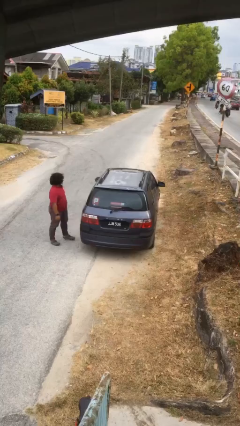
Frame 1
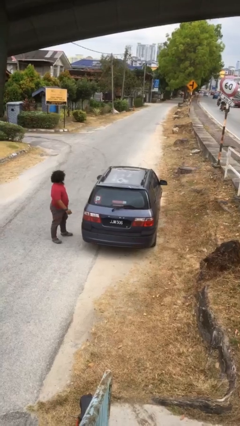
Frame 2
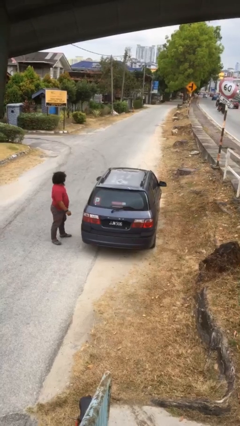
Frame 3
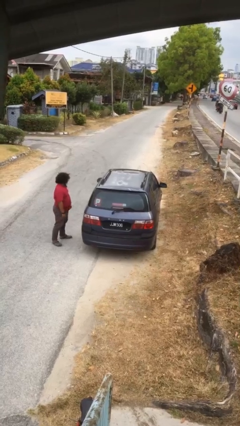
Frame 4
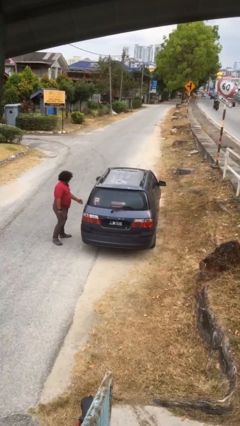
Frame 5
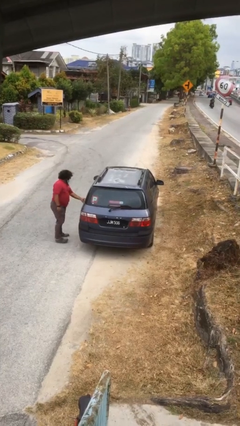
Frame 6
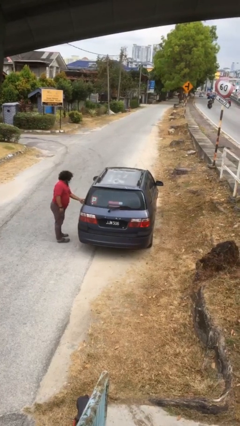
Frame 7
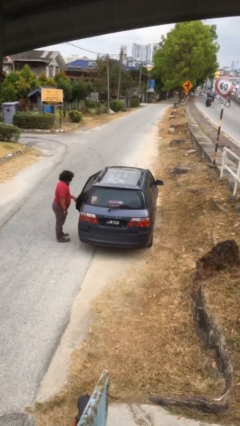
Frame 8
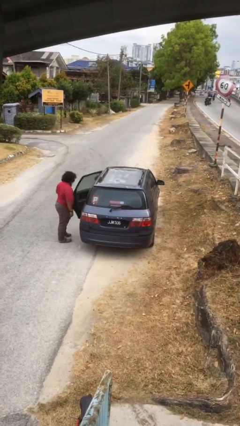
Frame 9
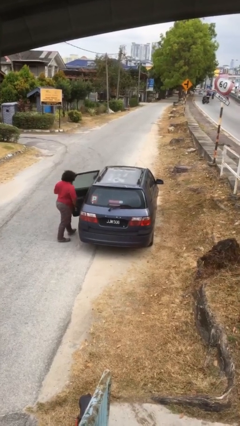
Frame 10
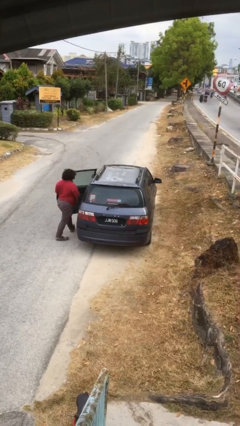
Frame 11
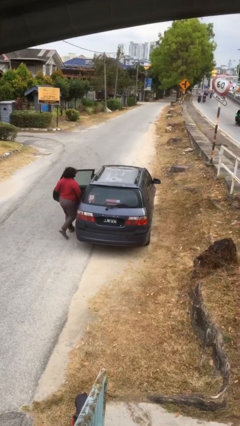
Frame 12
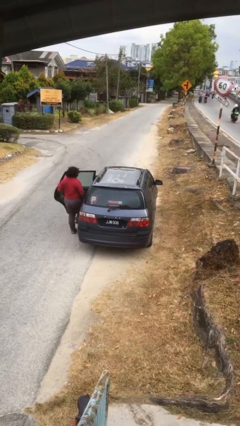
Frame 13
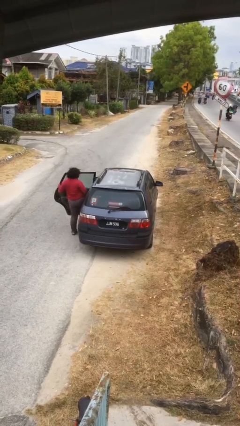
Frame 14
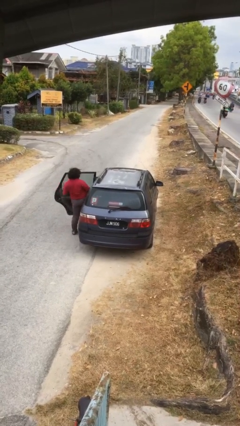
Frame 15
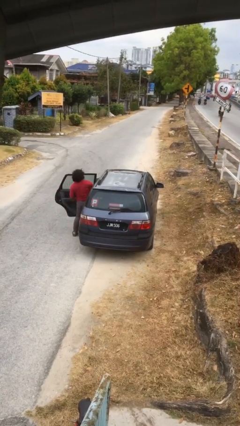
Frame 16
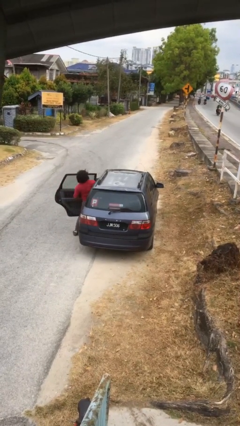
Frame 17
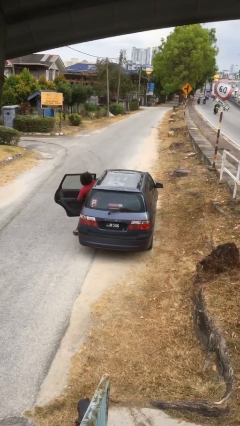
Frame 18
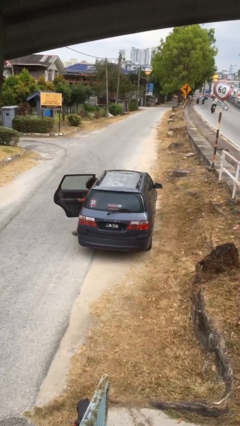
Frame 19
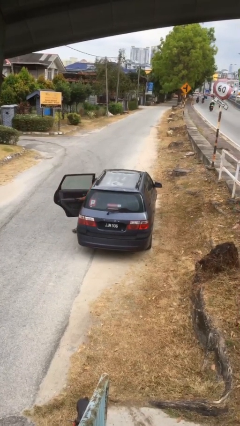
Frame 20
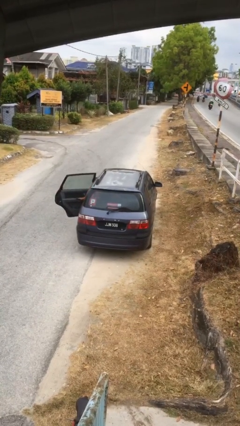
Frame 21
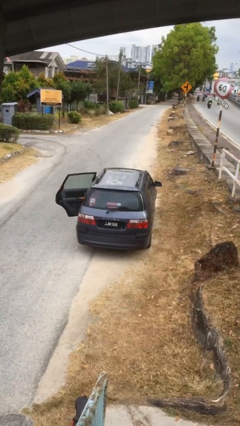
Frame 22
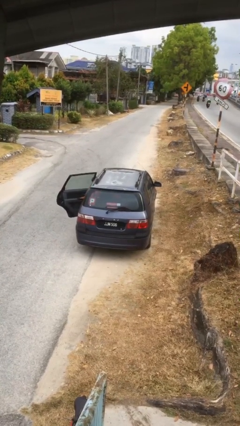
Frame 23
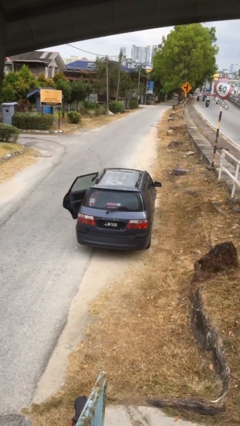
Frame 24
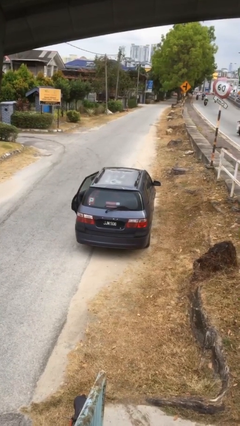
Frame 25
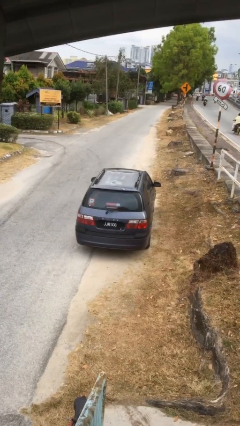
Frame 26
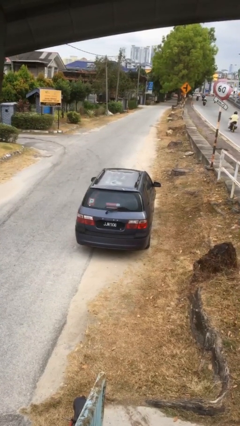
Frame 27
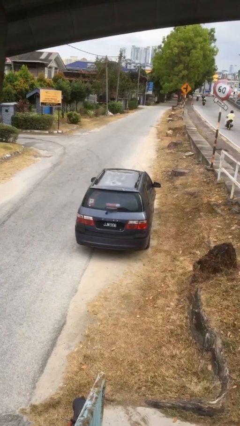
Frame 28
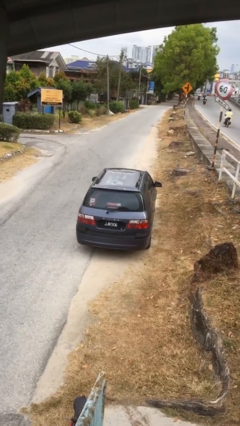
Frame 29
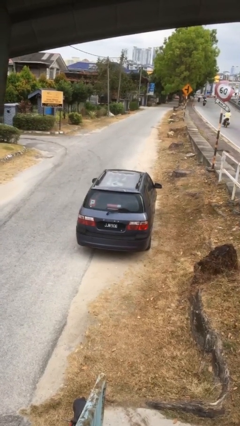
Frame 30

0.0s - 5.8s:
car picks up person

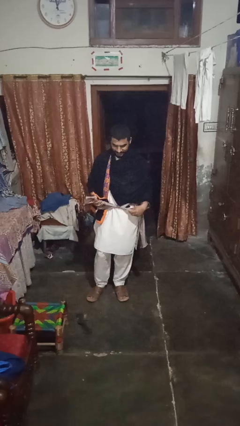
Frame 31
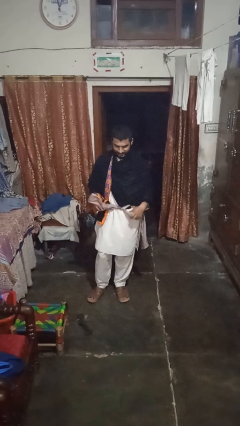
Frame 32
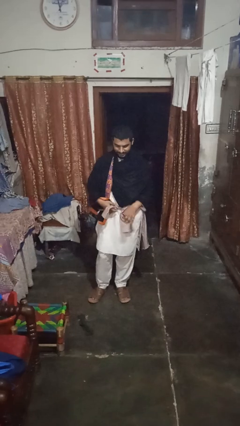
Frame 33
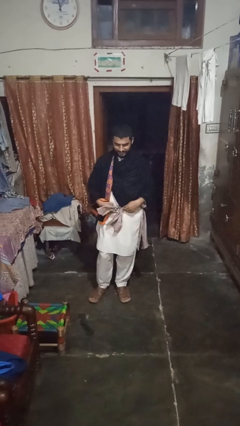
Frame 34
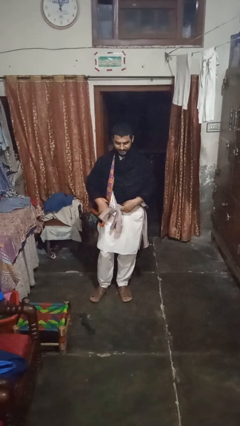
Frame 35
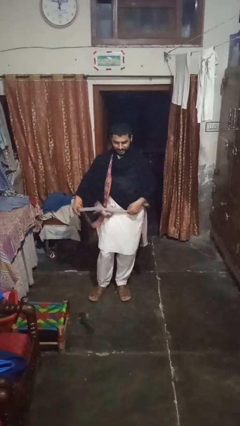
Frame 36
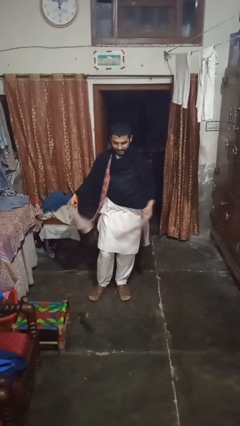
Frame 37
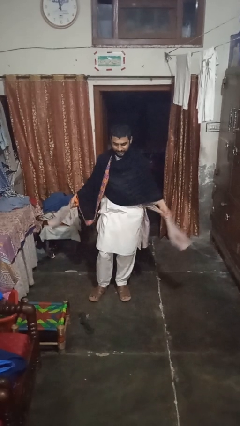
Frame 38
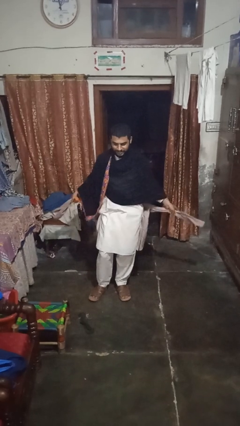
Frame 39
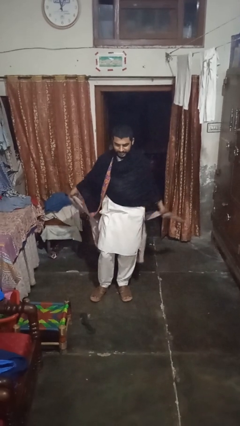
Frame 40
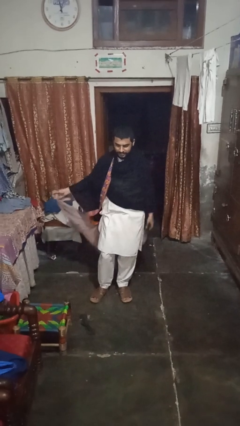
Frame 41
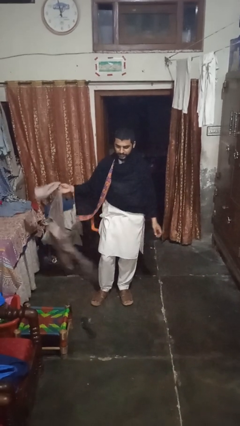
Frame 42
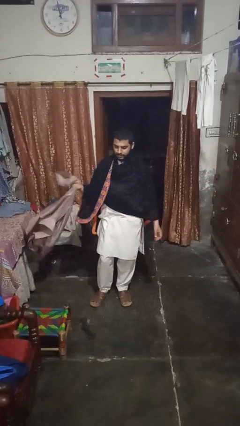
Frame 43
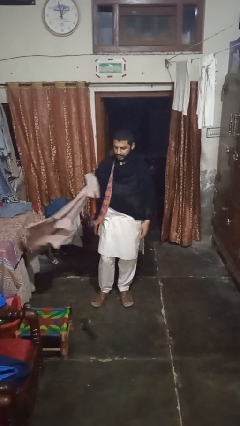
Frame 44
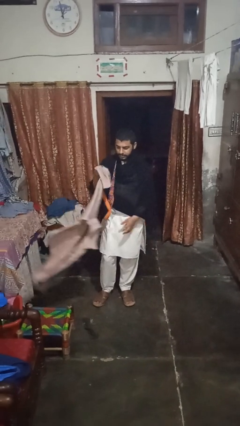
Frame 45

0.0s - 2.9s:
person unties jacket around waist

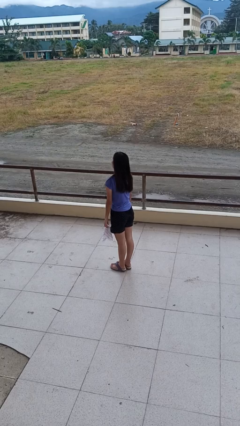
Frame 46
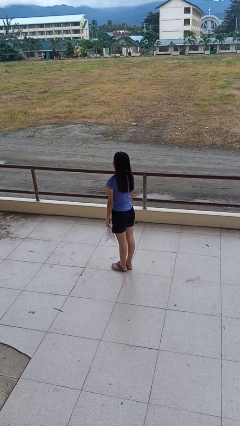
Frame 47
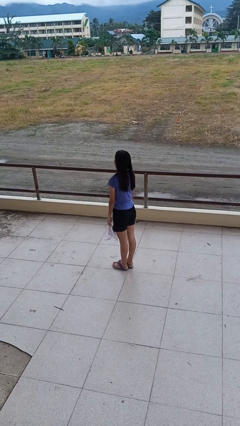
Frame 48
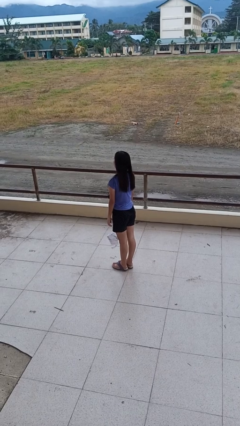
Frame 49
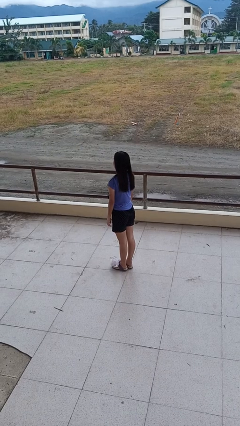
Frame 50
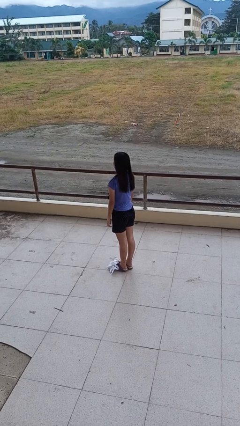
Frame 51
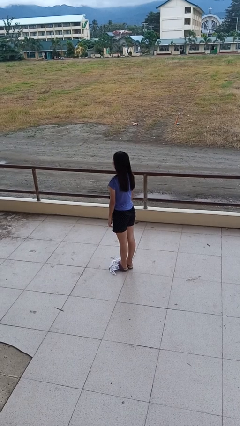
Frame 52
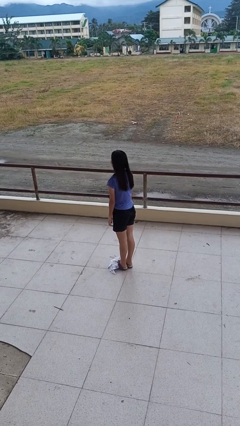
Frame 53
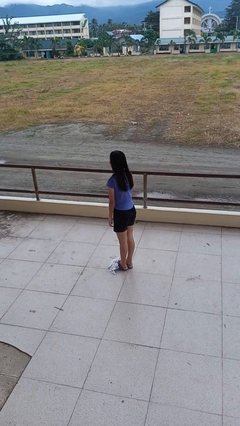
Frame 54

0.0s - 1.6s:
person drops object

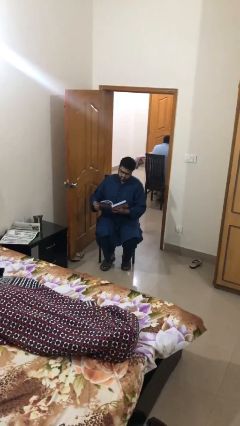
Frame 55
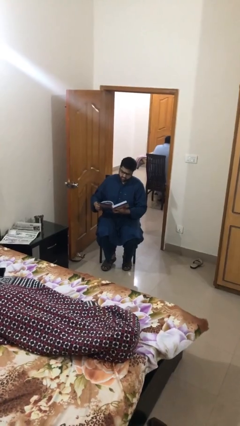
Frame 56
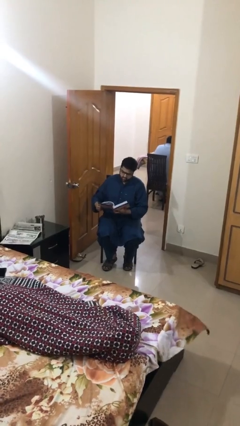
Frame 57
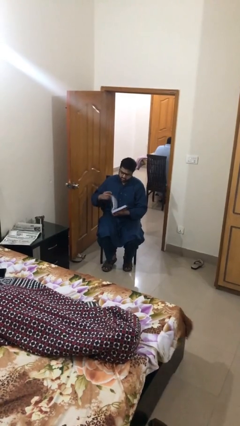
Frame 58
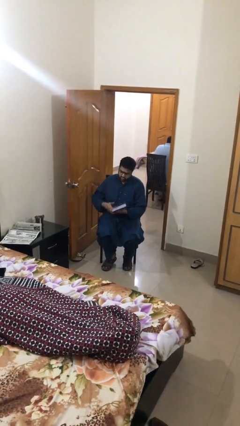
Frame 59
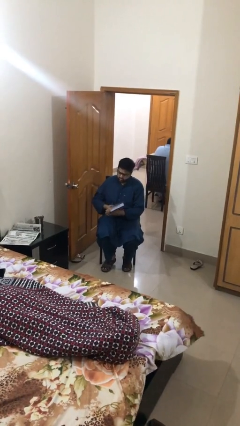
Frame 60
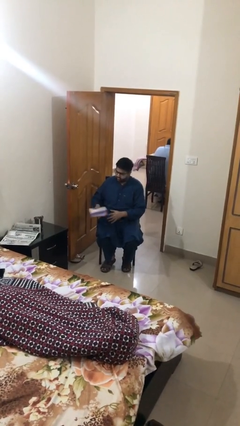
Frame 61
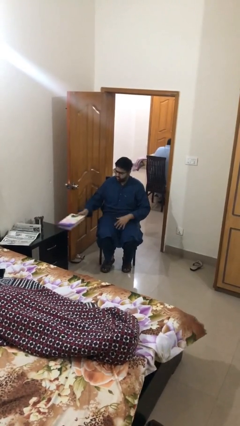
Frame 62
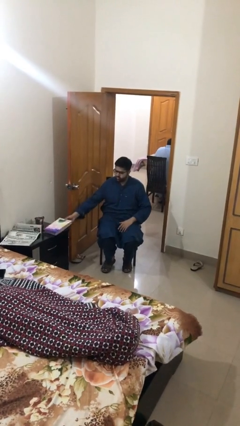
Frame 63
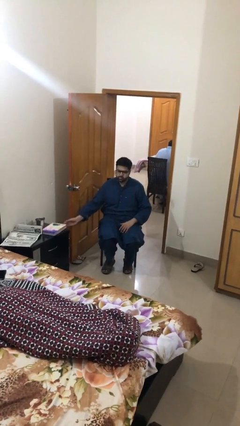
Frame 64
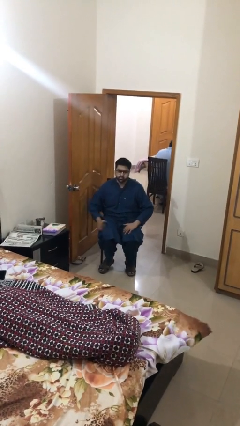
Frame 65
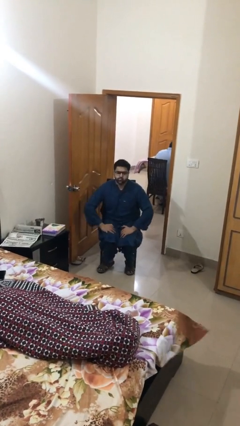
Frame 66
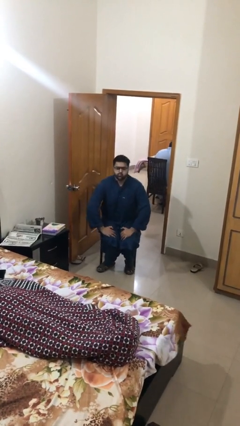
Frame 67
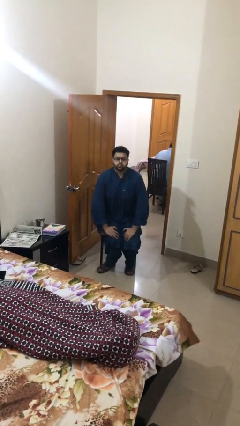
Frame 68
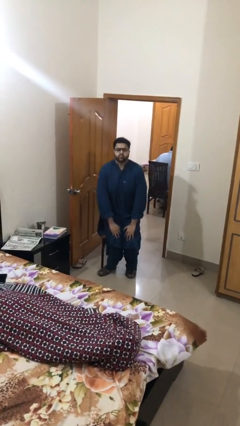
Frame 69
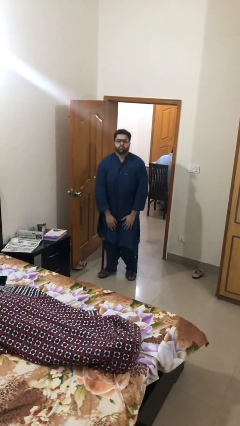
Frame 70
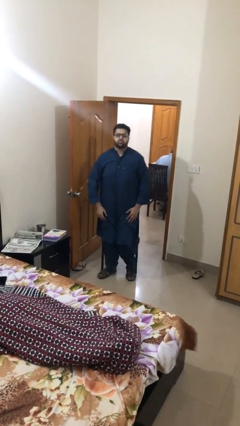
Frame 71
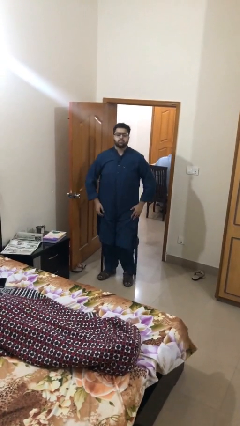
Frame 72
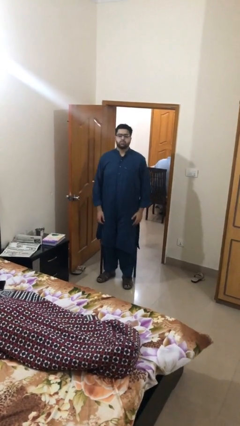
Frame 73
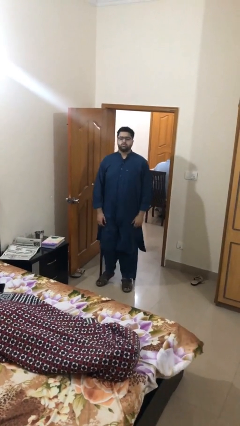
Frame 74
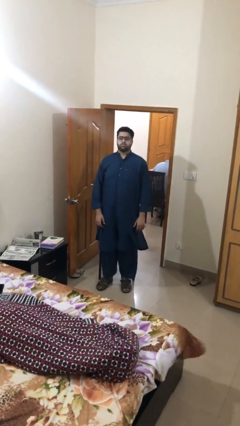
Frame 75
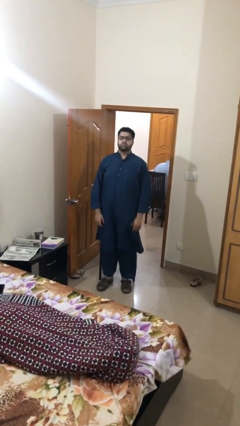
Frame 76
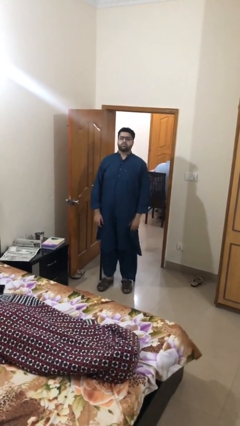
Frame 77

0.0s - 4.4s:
person stands up

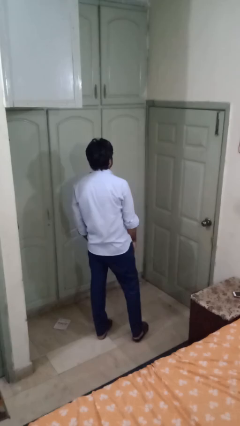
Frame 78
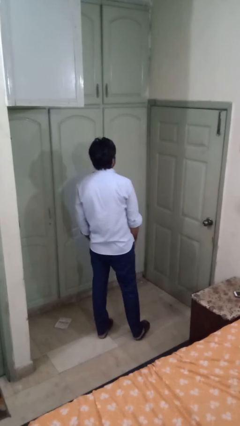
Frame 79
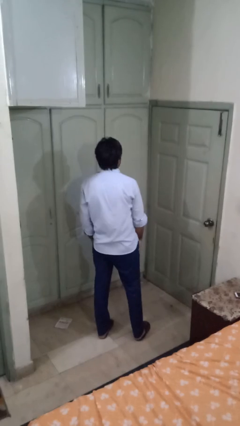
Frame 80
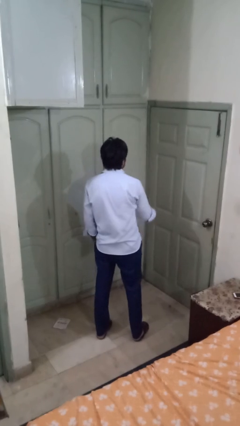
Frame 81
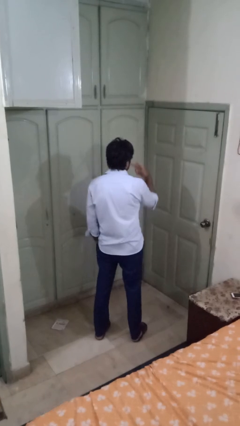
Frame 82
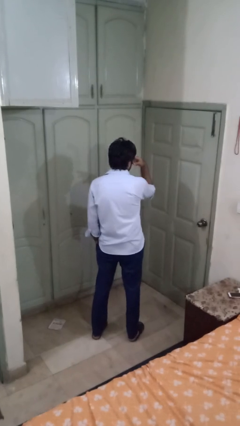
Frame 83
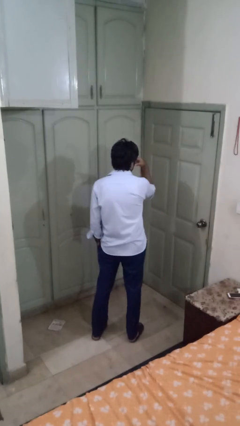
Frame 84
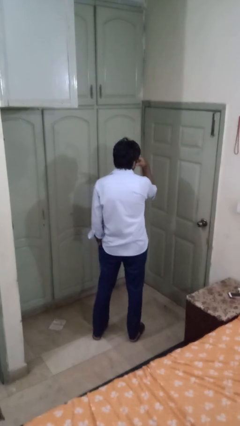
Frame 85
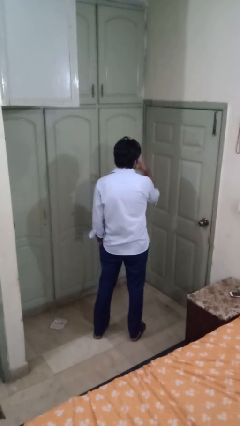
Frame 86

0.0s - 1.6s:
person gestures watch closely

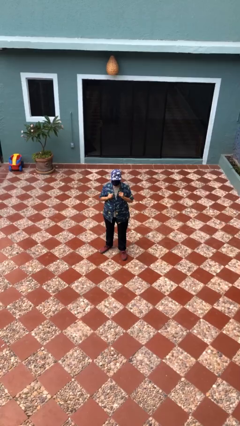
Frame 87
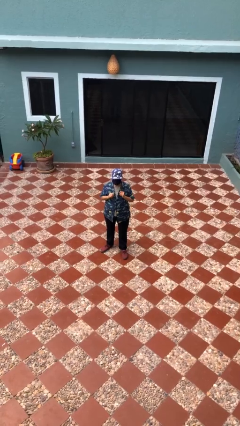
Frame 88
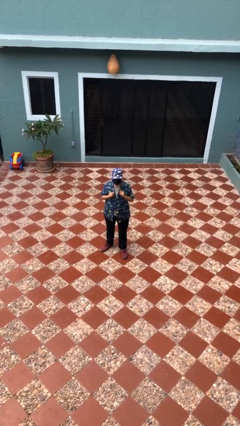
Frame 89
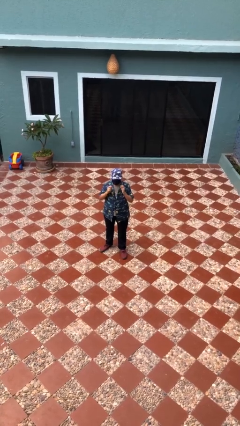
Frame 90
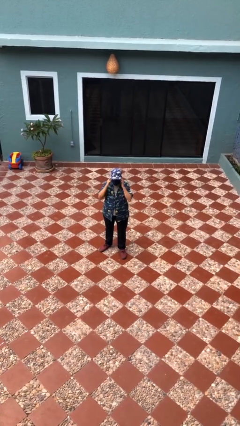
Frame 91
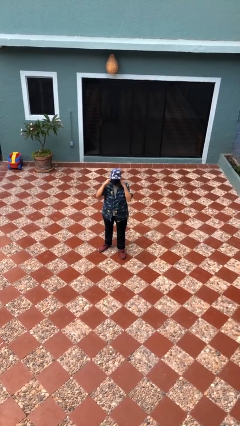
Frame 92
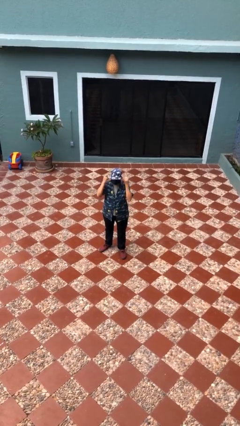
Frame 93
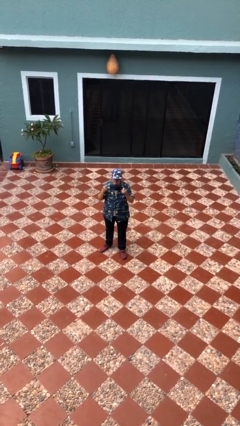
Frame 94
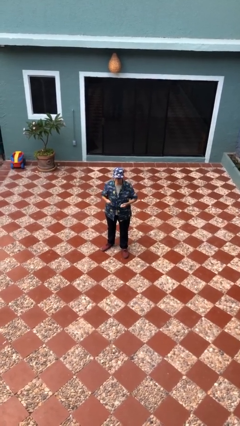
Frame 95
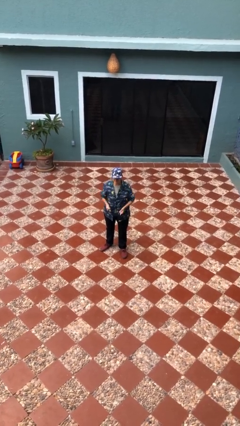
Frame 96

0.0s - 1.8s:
person takes off facemask
